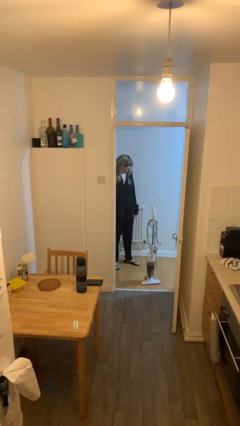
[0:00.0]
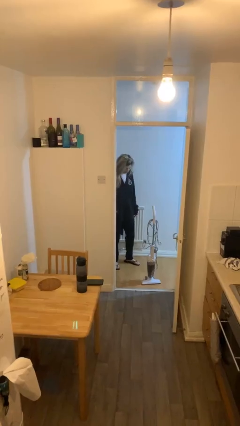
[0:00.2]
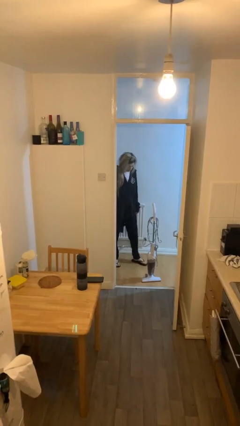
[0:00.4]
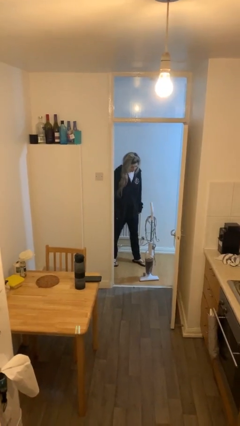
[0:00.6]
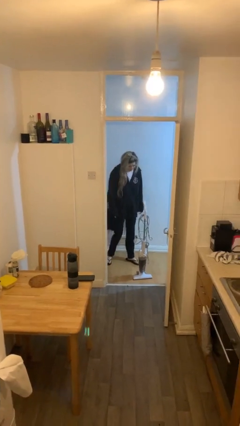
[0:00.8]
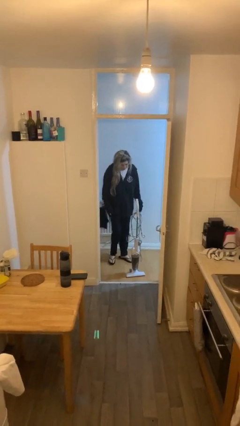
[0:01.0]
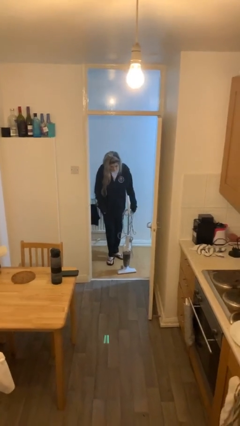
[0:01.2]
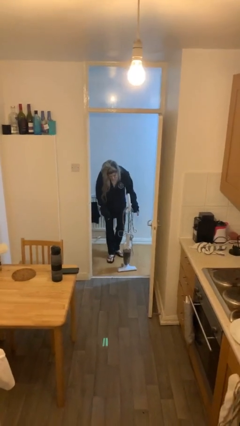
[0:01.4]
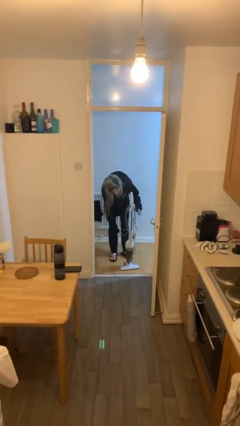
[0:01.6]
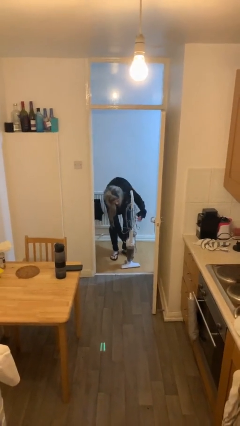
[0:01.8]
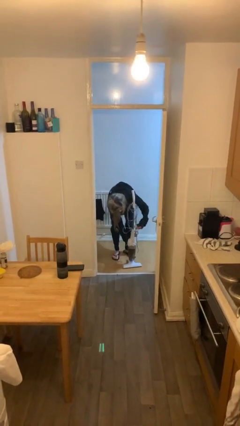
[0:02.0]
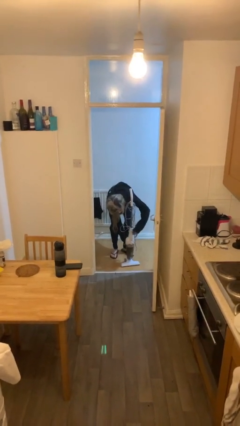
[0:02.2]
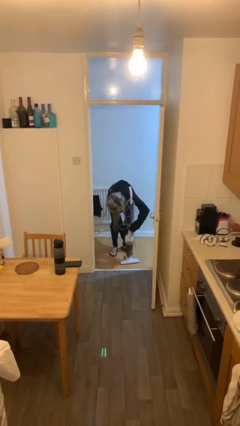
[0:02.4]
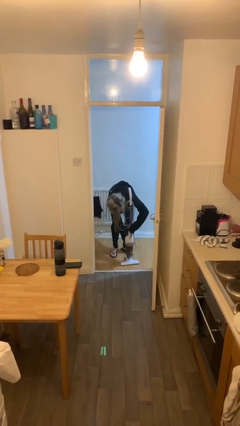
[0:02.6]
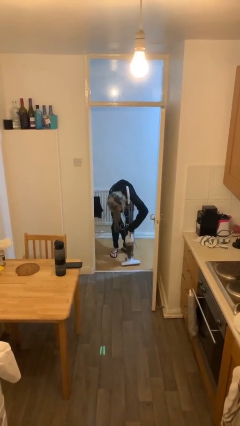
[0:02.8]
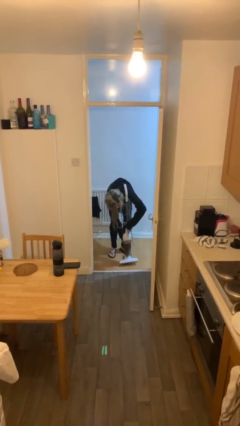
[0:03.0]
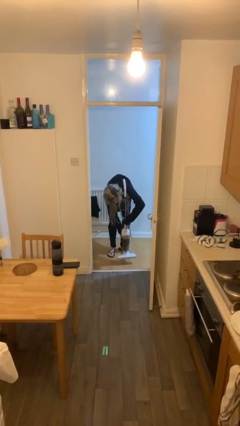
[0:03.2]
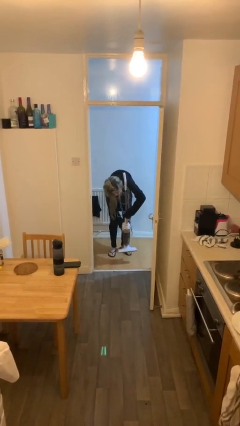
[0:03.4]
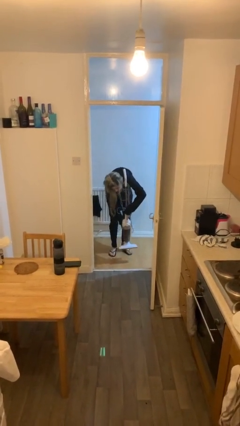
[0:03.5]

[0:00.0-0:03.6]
person picks up object from floor

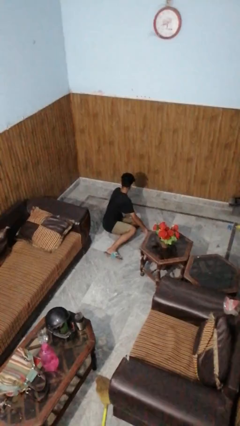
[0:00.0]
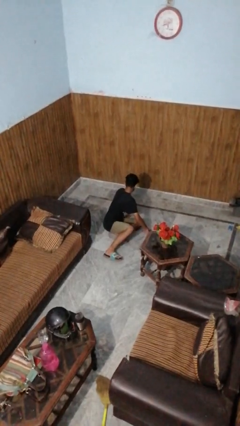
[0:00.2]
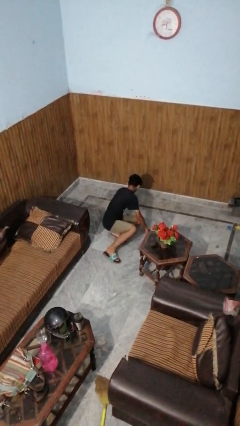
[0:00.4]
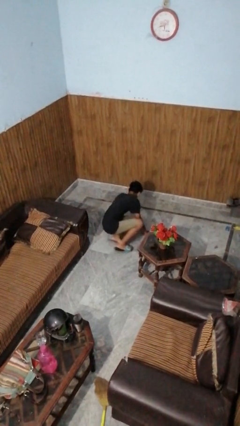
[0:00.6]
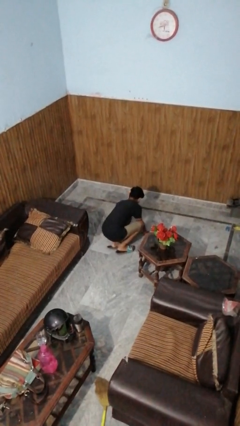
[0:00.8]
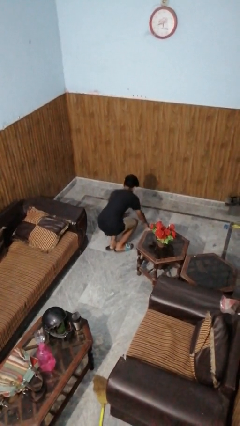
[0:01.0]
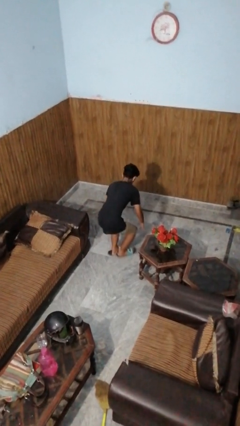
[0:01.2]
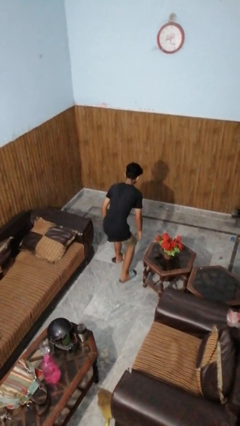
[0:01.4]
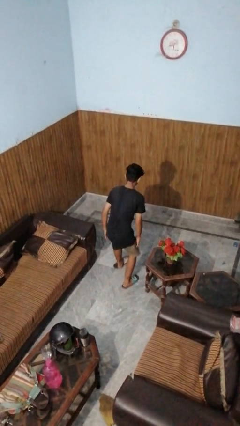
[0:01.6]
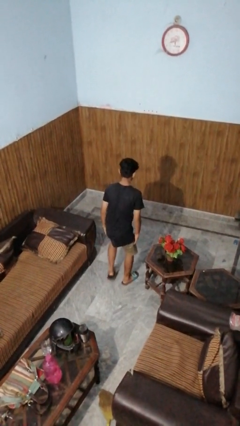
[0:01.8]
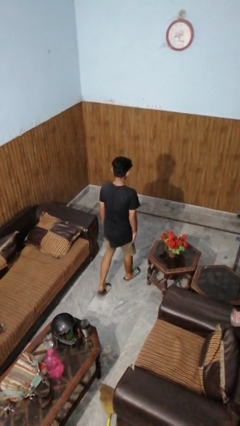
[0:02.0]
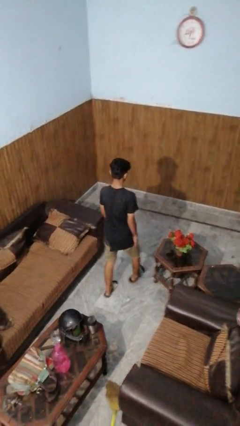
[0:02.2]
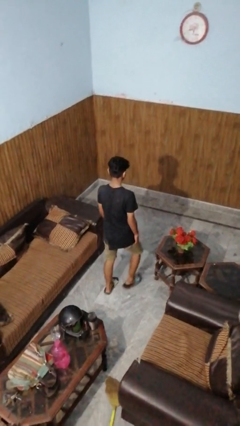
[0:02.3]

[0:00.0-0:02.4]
person stands up from floor

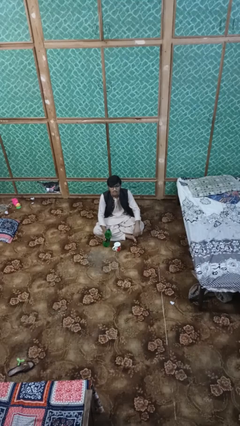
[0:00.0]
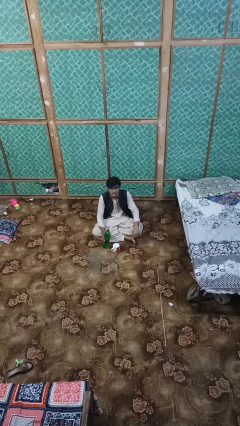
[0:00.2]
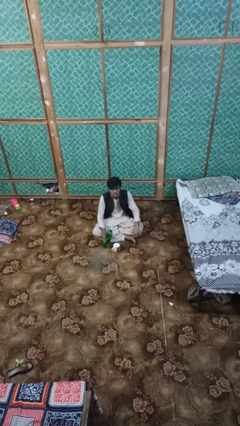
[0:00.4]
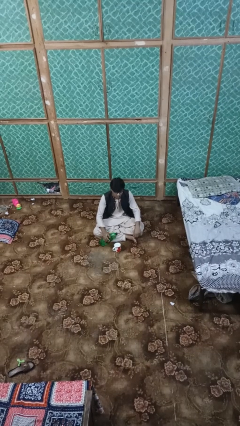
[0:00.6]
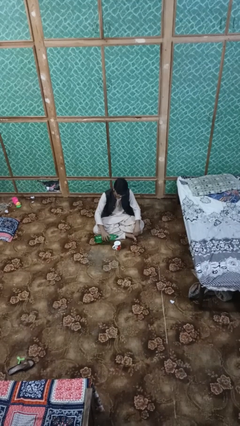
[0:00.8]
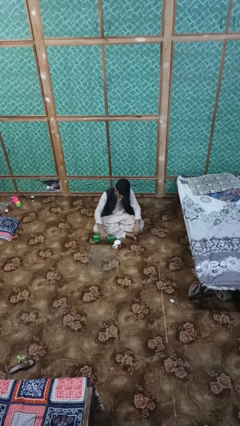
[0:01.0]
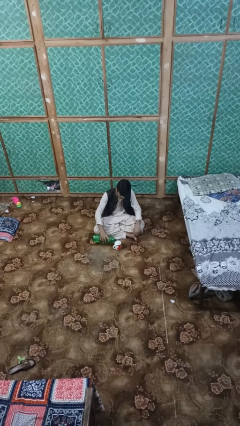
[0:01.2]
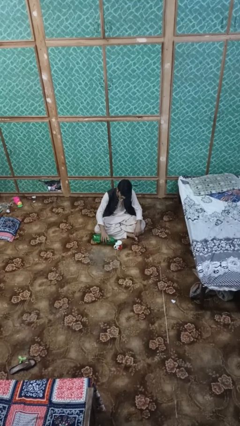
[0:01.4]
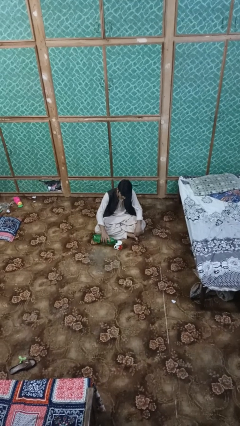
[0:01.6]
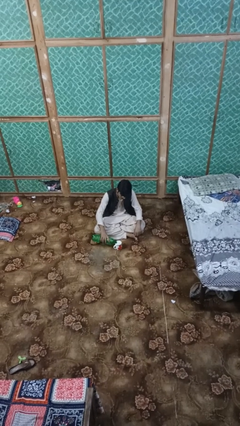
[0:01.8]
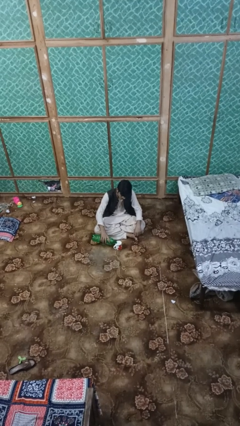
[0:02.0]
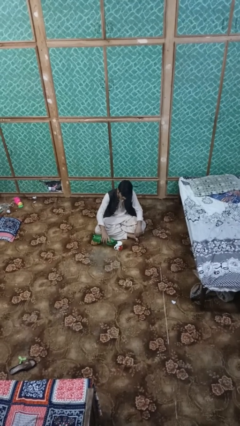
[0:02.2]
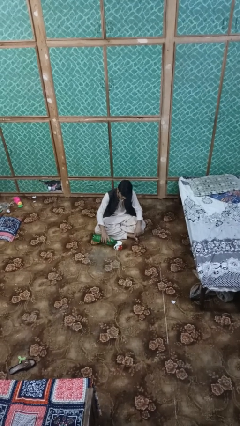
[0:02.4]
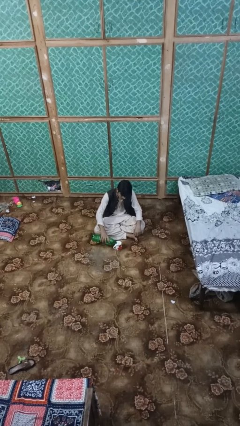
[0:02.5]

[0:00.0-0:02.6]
person pours liquid into cup

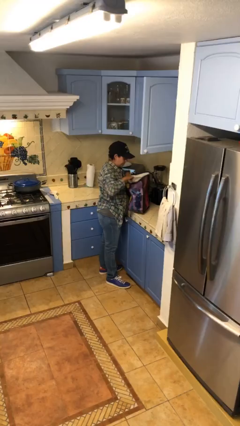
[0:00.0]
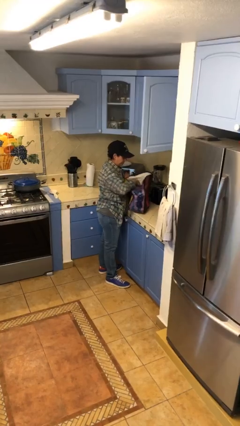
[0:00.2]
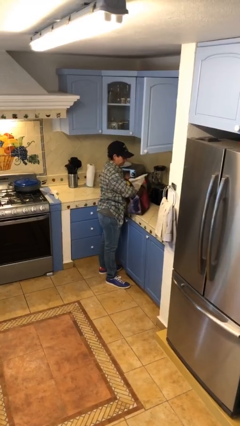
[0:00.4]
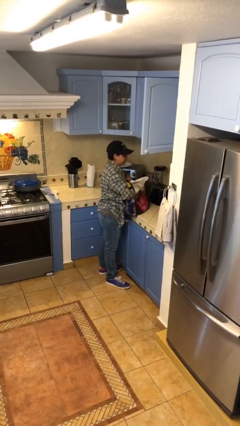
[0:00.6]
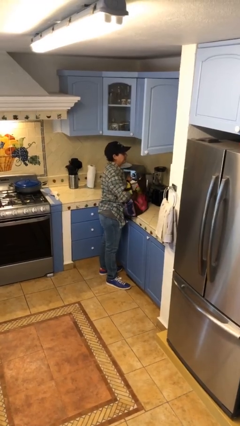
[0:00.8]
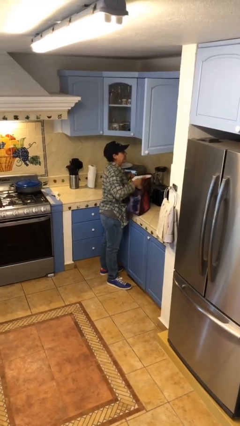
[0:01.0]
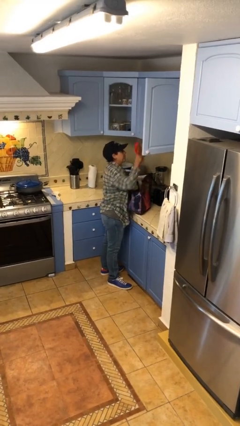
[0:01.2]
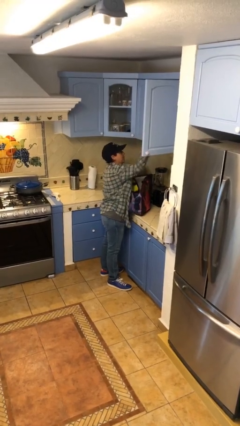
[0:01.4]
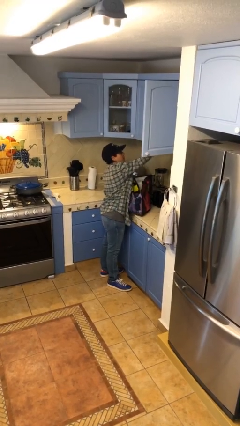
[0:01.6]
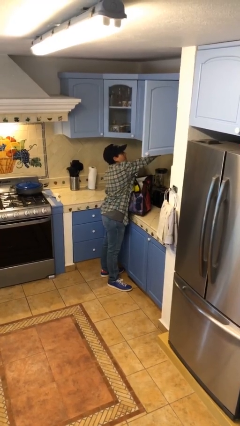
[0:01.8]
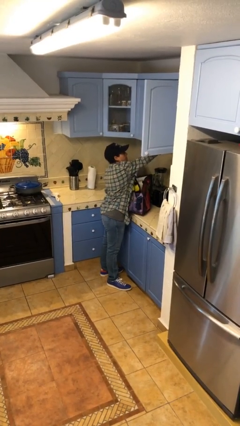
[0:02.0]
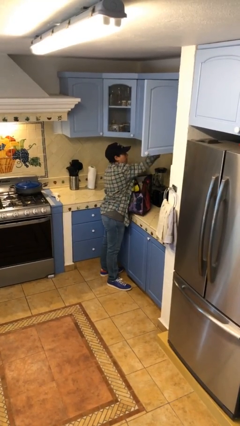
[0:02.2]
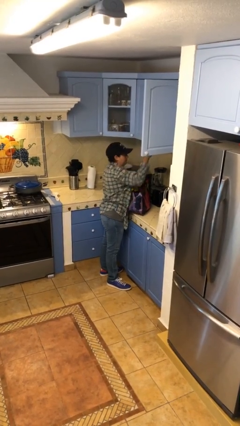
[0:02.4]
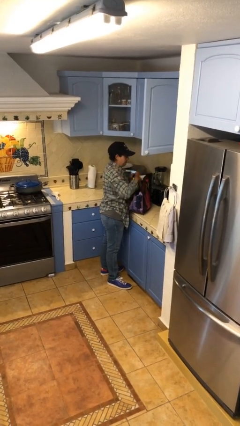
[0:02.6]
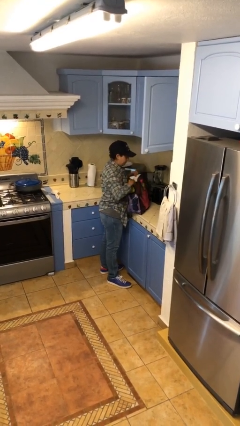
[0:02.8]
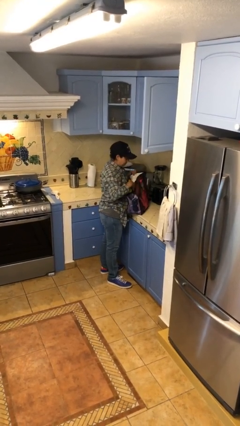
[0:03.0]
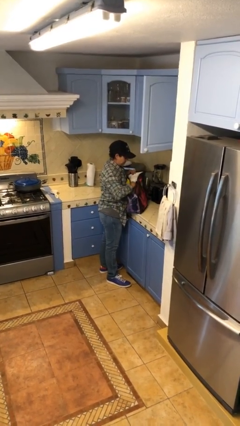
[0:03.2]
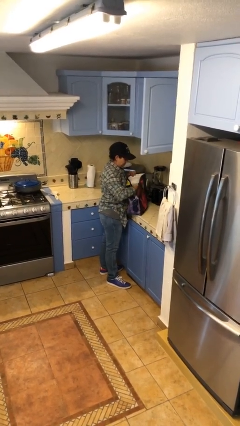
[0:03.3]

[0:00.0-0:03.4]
person loads groceries into cabinet

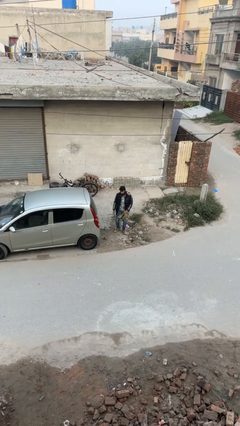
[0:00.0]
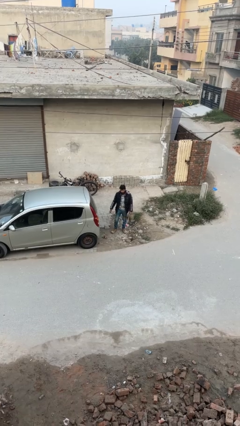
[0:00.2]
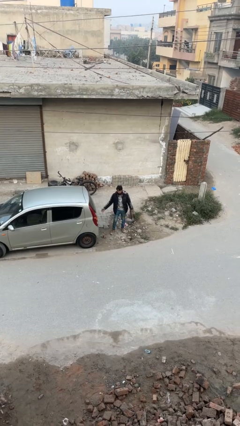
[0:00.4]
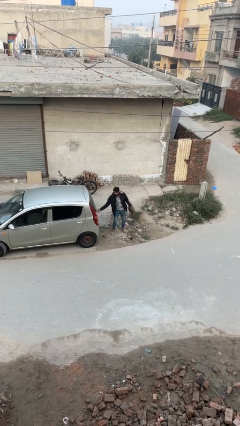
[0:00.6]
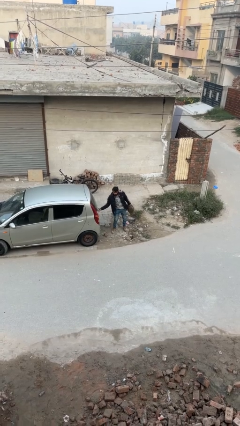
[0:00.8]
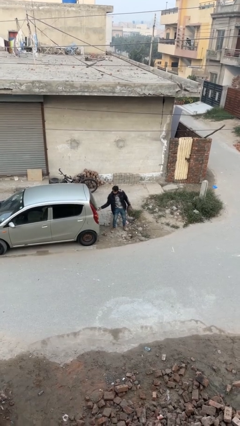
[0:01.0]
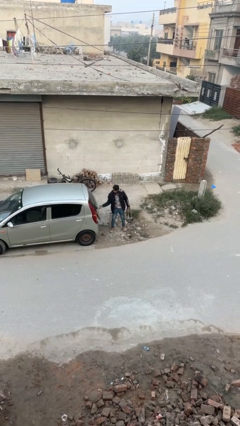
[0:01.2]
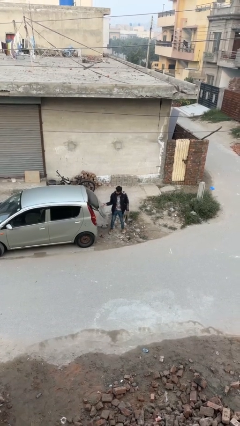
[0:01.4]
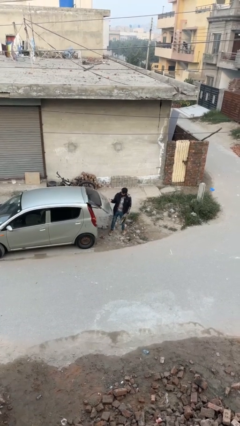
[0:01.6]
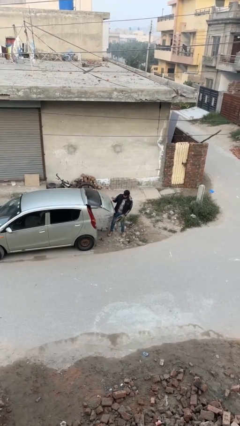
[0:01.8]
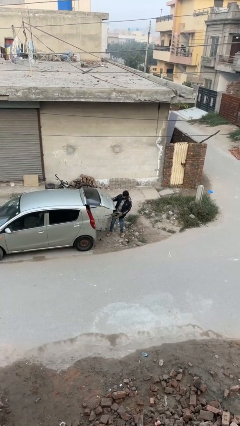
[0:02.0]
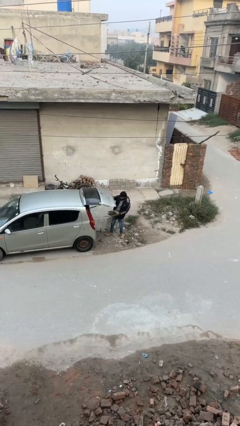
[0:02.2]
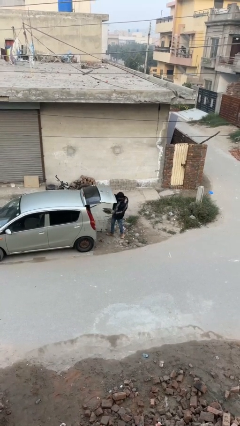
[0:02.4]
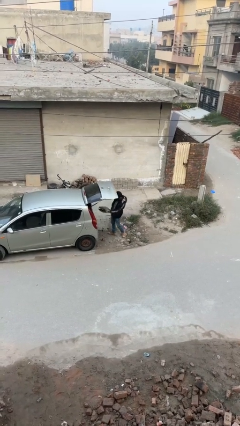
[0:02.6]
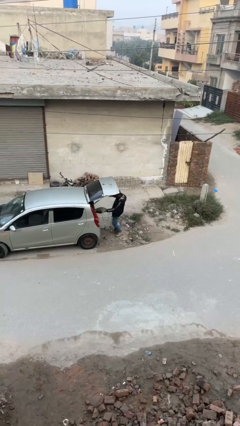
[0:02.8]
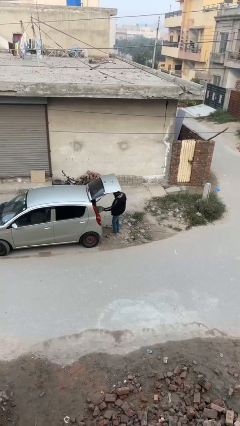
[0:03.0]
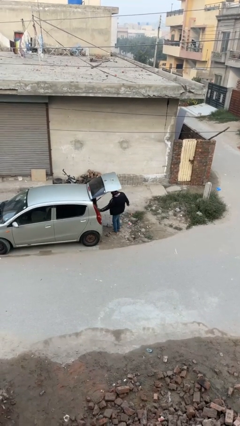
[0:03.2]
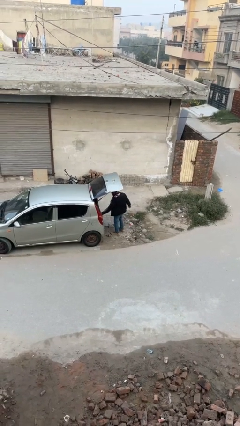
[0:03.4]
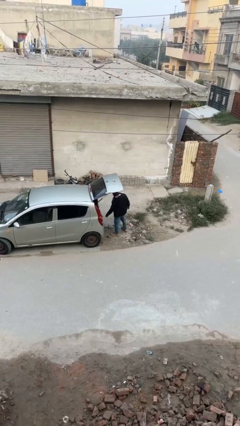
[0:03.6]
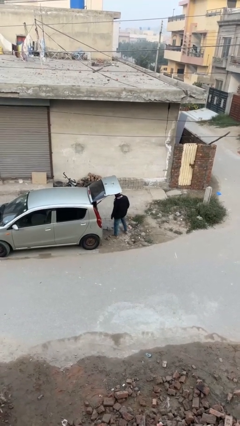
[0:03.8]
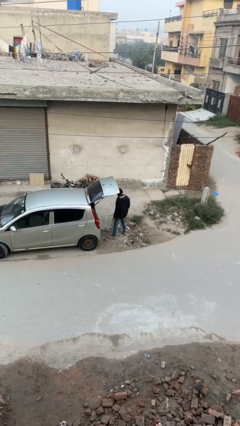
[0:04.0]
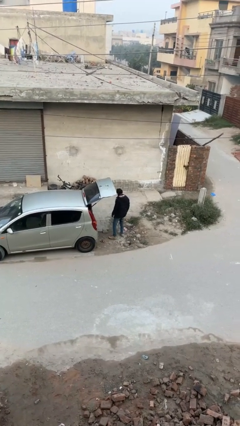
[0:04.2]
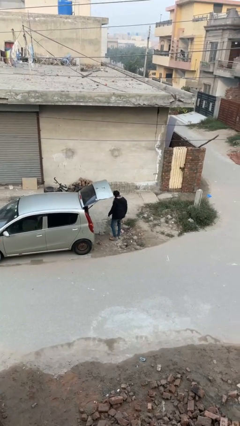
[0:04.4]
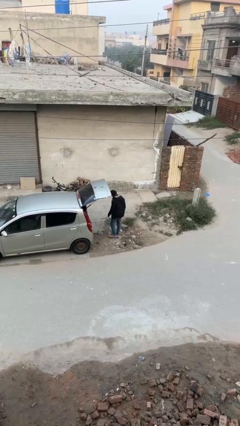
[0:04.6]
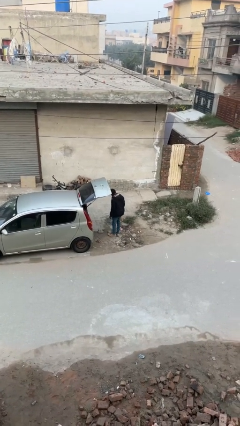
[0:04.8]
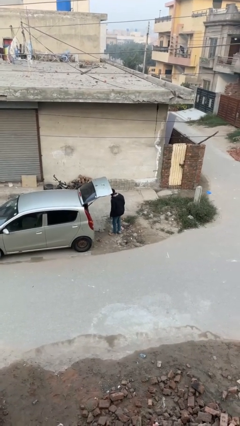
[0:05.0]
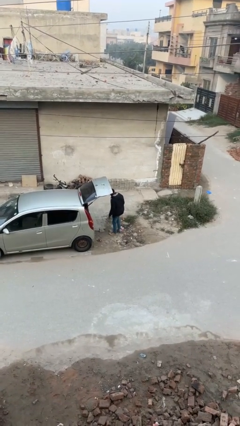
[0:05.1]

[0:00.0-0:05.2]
person loads car
